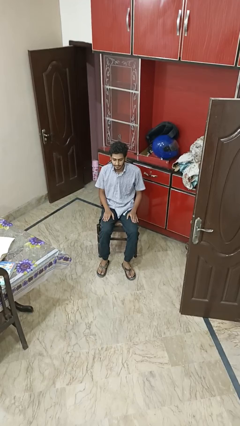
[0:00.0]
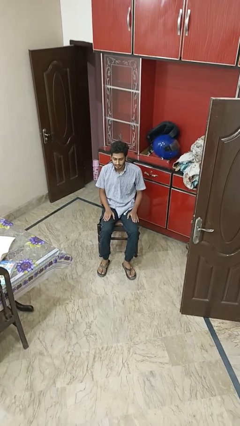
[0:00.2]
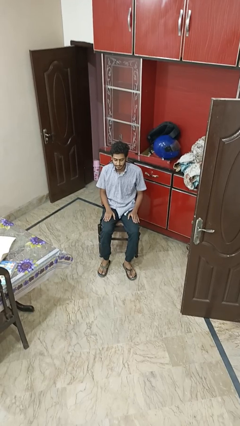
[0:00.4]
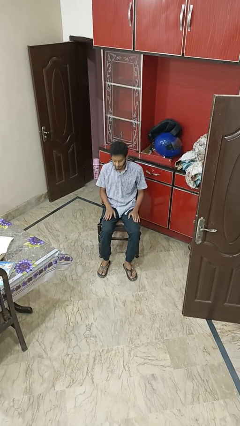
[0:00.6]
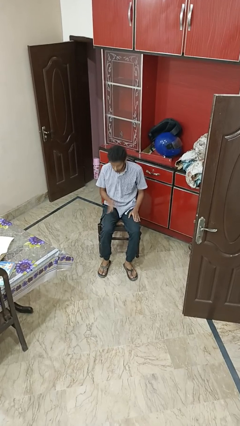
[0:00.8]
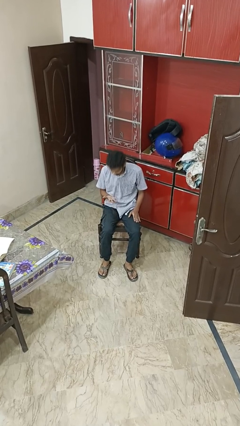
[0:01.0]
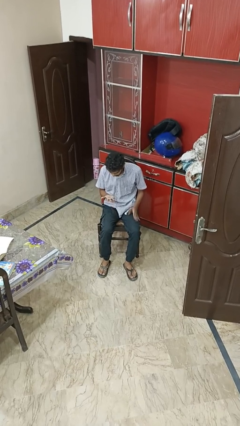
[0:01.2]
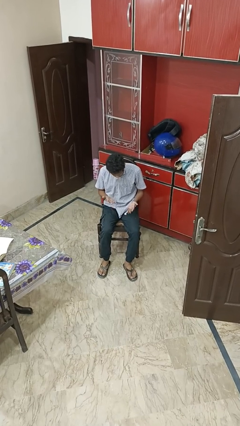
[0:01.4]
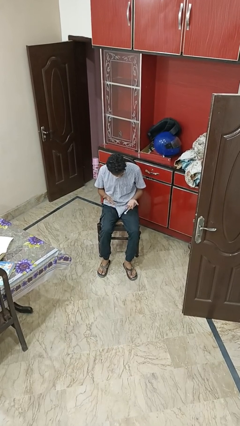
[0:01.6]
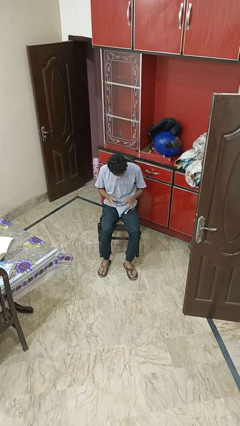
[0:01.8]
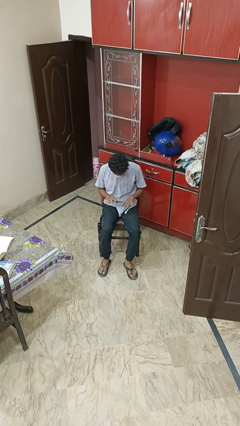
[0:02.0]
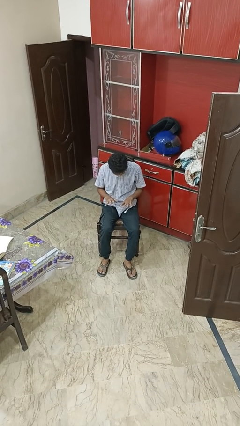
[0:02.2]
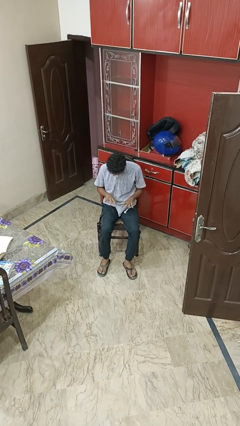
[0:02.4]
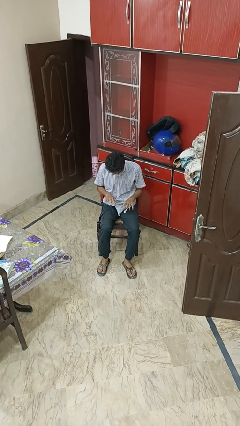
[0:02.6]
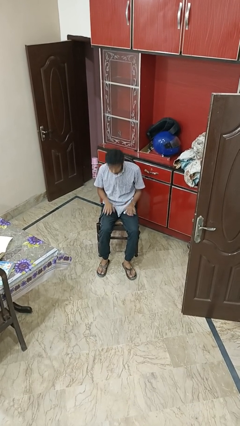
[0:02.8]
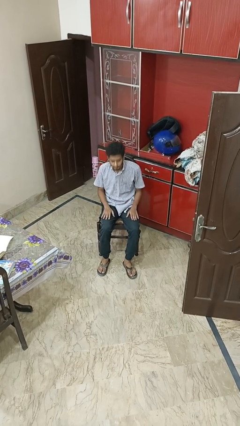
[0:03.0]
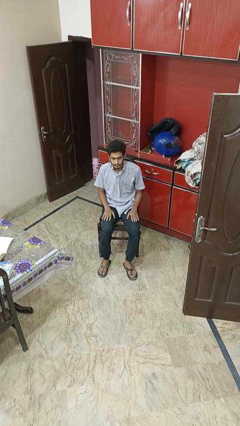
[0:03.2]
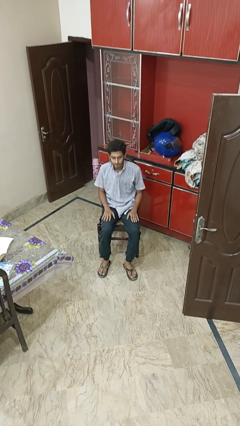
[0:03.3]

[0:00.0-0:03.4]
person looks at hands in lap

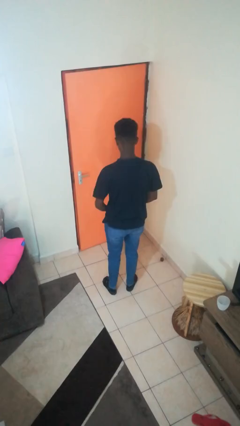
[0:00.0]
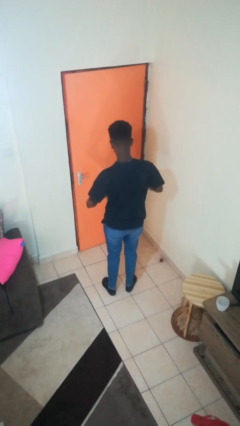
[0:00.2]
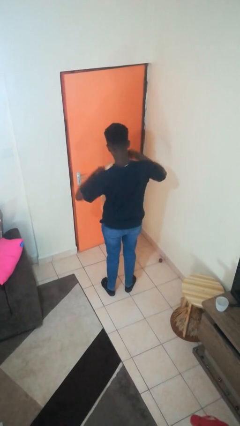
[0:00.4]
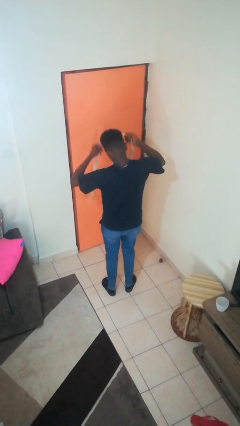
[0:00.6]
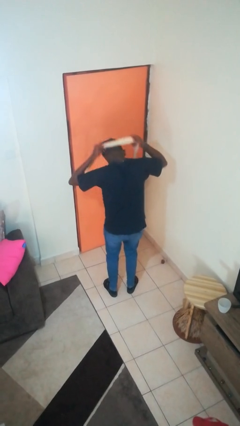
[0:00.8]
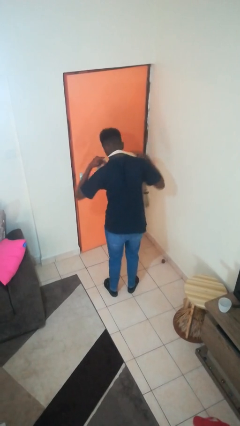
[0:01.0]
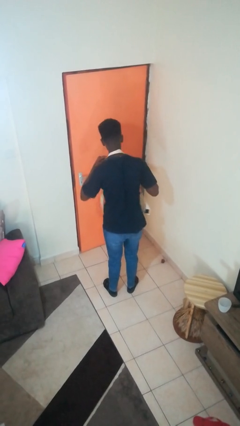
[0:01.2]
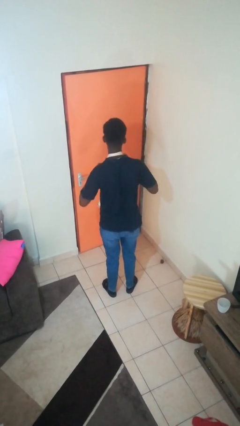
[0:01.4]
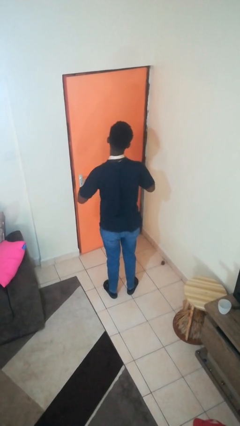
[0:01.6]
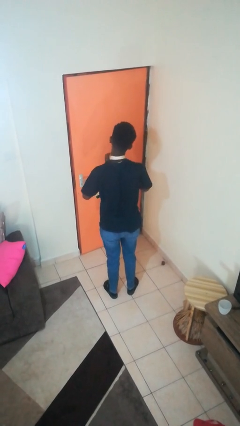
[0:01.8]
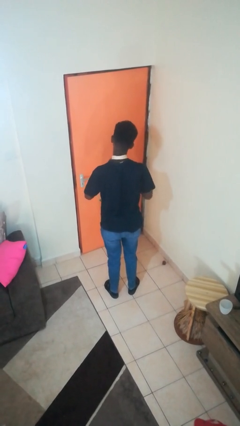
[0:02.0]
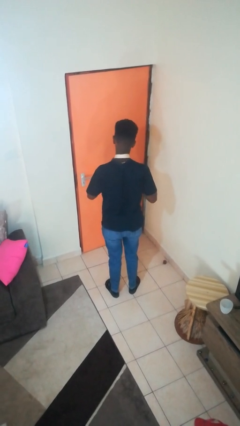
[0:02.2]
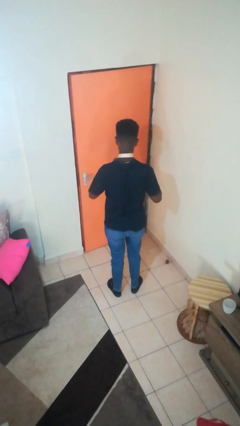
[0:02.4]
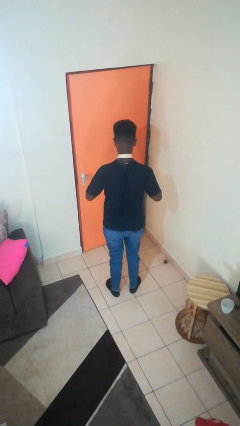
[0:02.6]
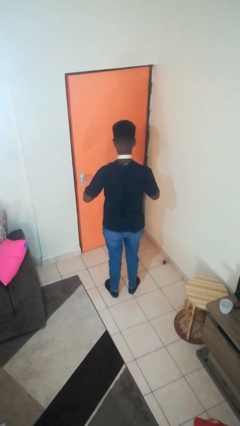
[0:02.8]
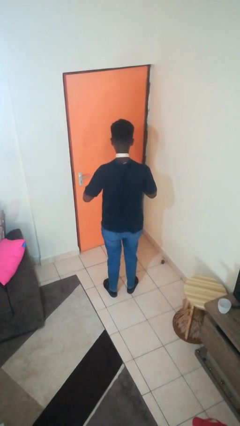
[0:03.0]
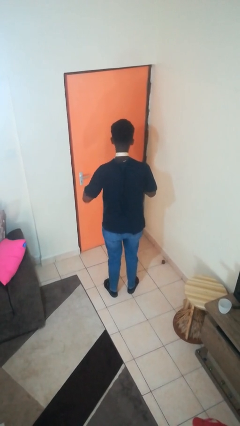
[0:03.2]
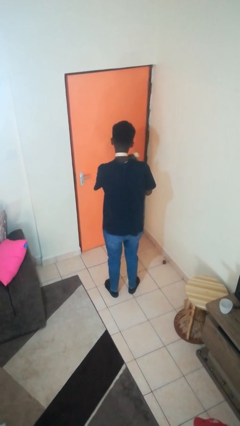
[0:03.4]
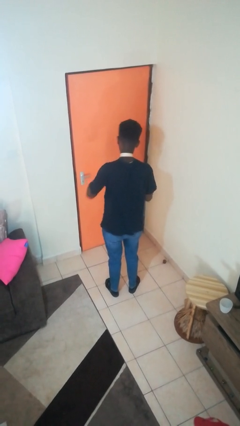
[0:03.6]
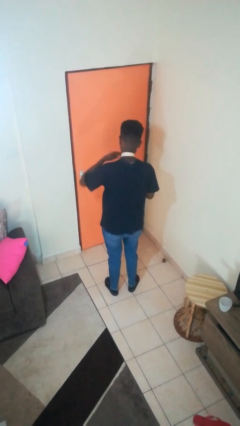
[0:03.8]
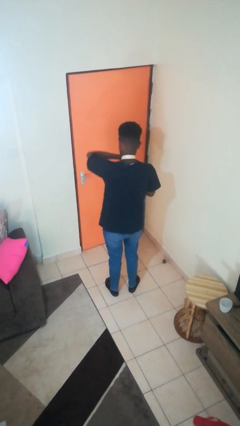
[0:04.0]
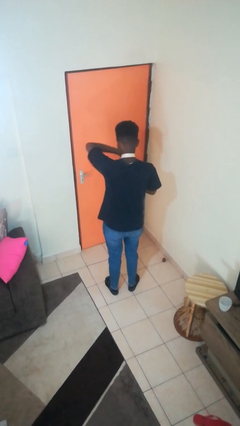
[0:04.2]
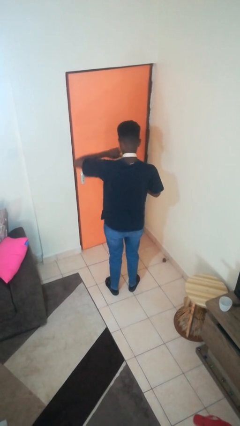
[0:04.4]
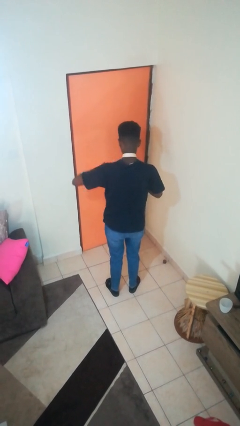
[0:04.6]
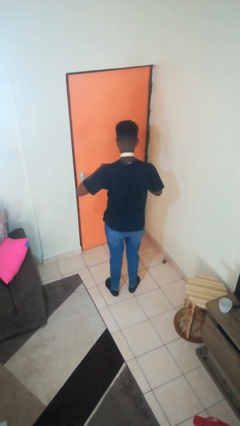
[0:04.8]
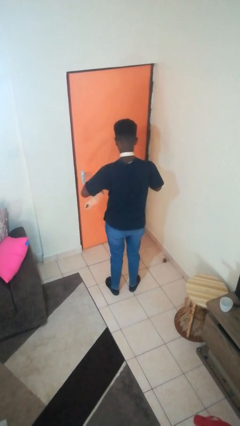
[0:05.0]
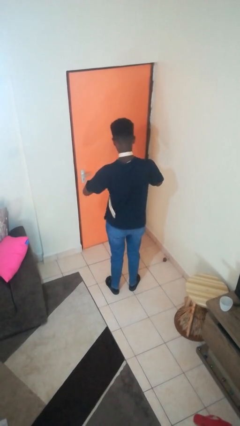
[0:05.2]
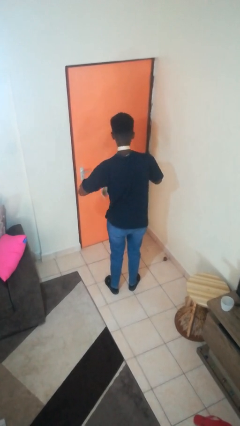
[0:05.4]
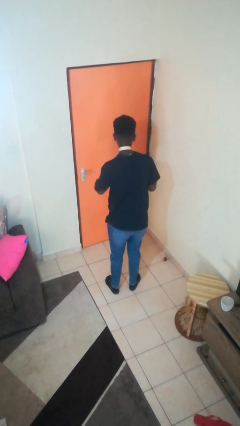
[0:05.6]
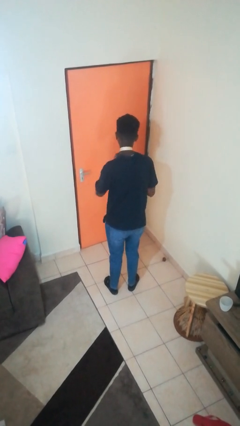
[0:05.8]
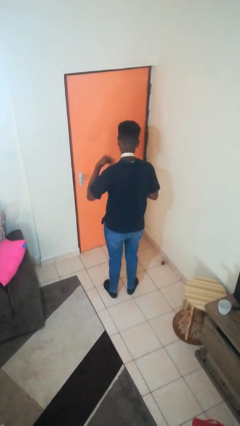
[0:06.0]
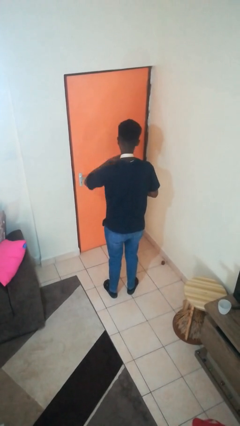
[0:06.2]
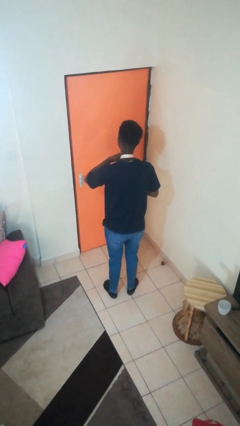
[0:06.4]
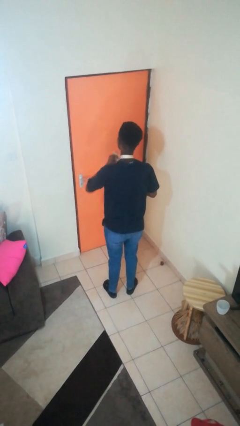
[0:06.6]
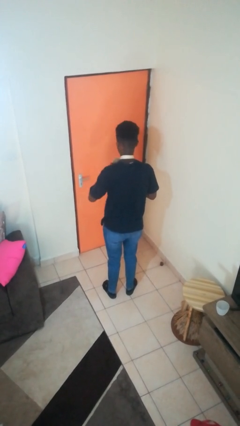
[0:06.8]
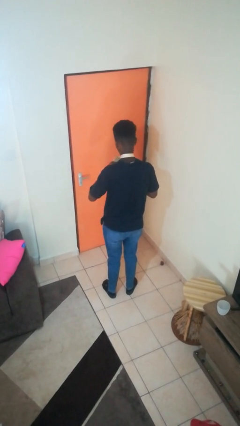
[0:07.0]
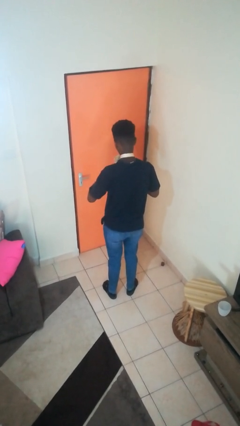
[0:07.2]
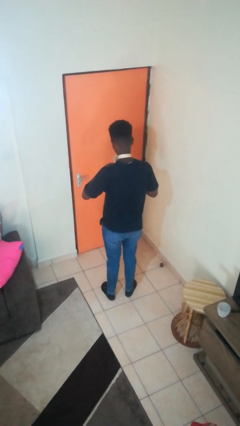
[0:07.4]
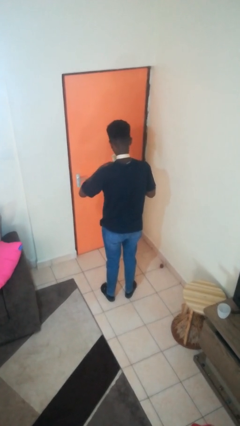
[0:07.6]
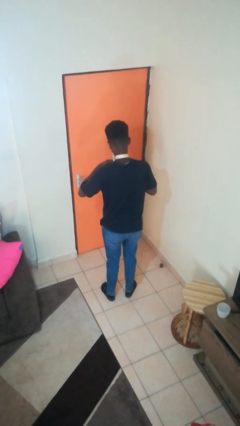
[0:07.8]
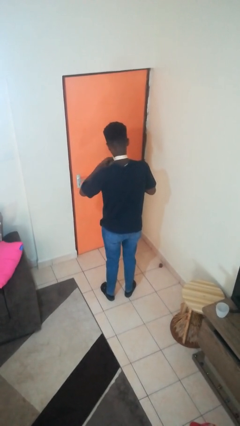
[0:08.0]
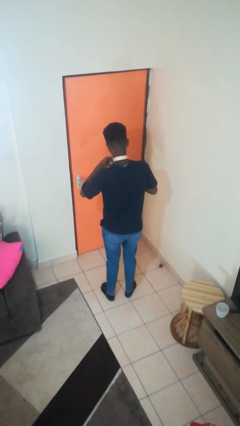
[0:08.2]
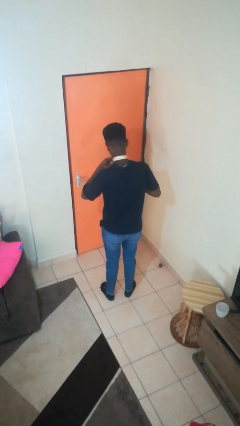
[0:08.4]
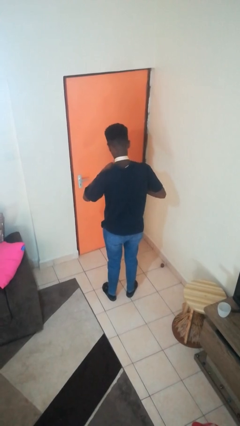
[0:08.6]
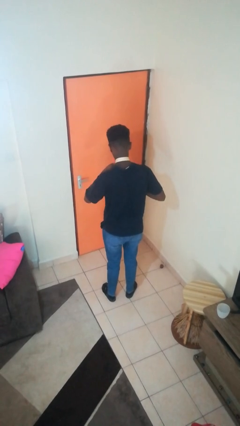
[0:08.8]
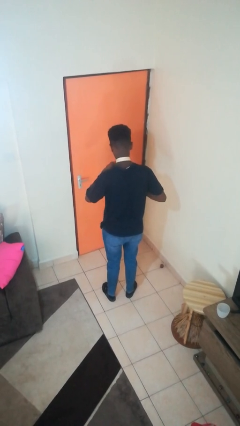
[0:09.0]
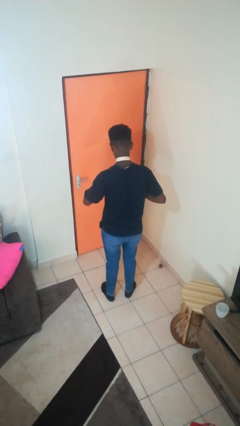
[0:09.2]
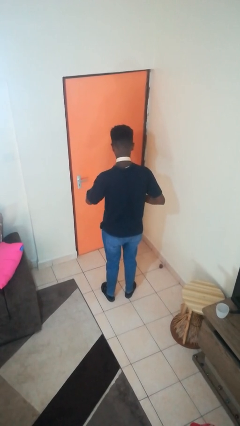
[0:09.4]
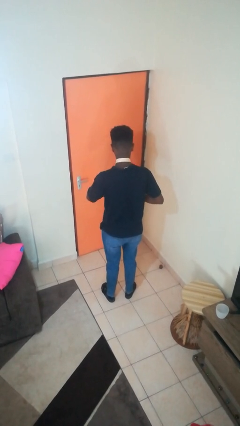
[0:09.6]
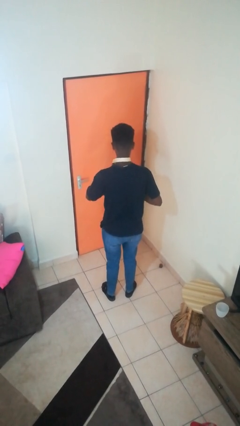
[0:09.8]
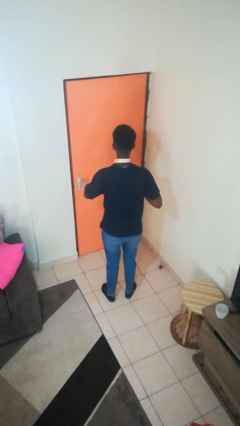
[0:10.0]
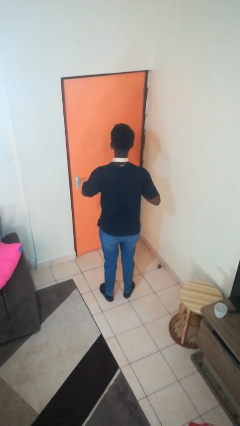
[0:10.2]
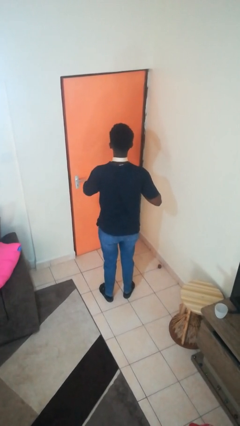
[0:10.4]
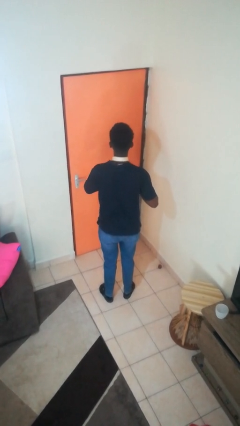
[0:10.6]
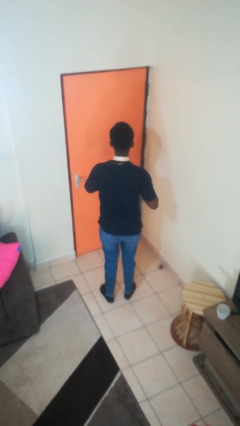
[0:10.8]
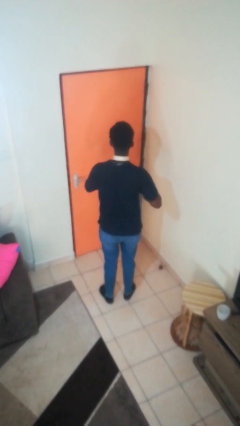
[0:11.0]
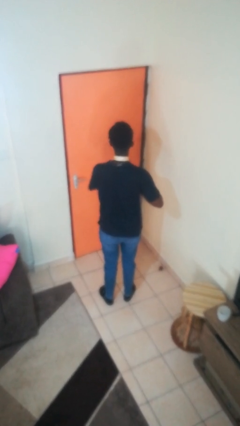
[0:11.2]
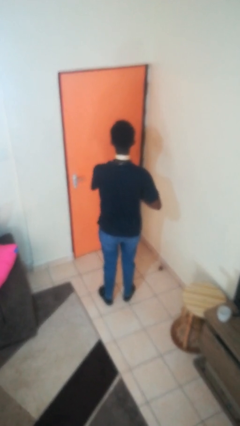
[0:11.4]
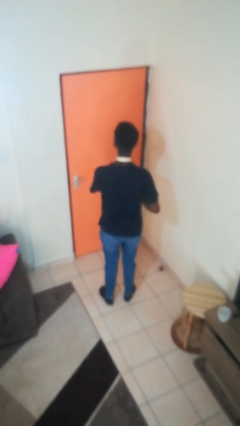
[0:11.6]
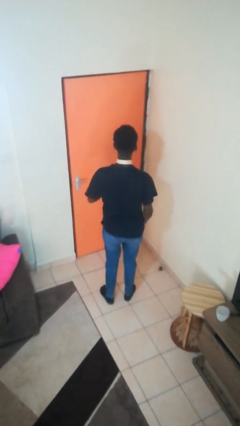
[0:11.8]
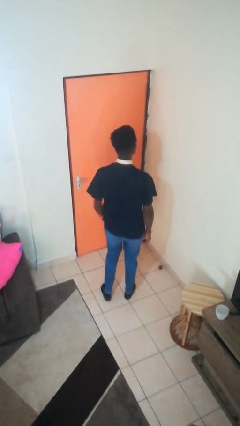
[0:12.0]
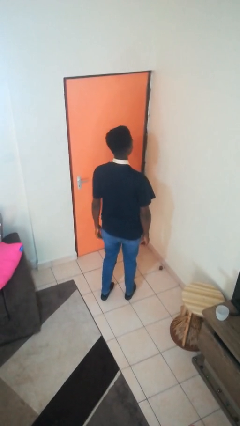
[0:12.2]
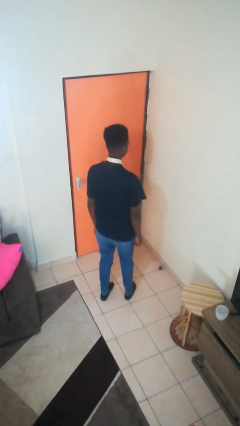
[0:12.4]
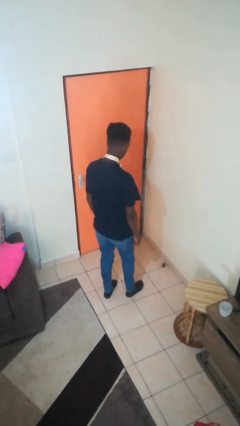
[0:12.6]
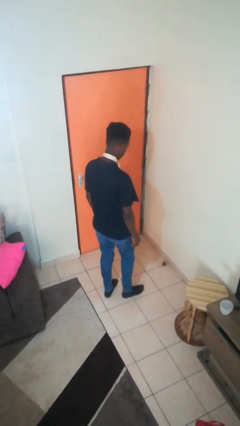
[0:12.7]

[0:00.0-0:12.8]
person puts on necktie

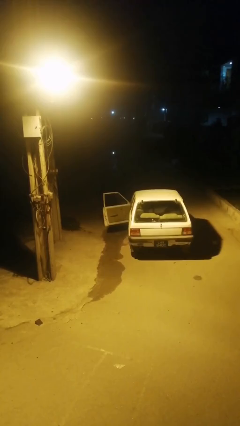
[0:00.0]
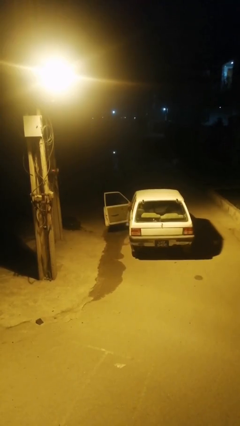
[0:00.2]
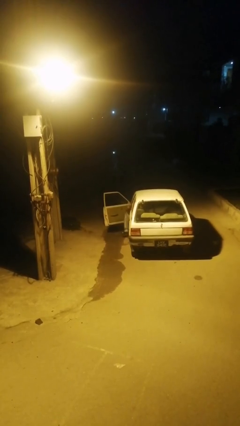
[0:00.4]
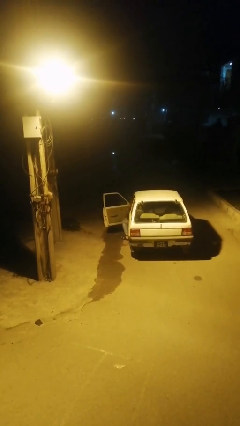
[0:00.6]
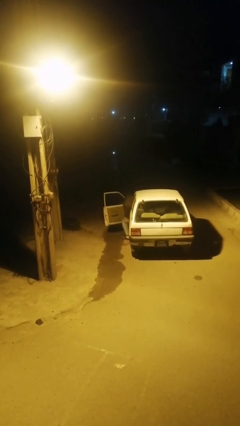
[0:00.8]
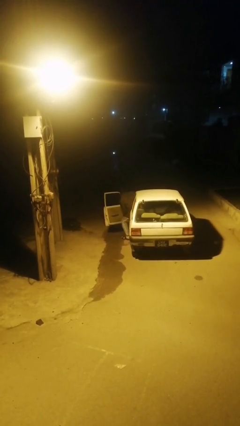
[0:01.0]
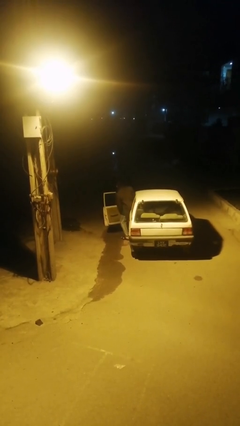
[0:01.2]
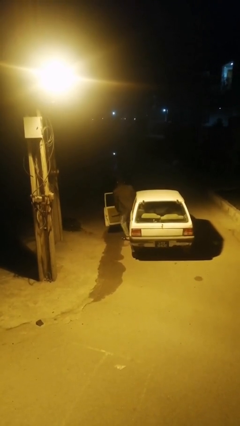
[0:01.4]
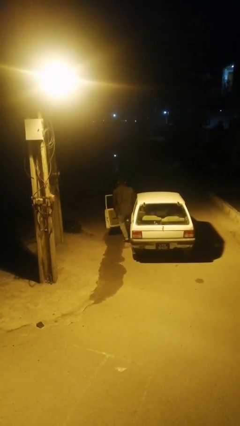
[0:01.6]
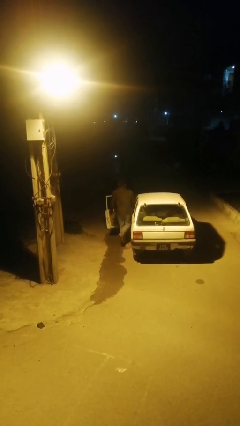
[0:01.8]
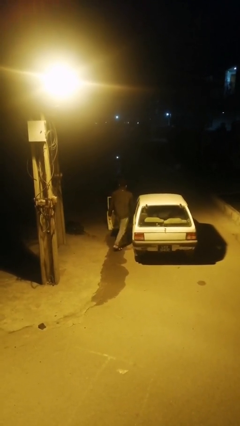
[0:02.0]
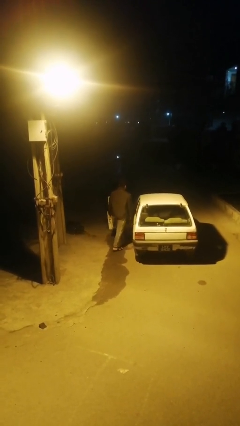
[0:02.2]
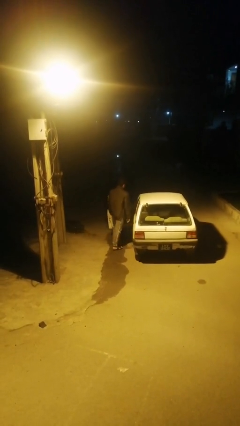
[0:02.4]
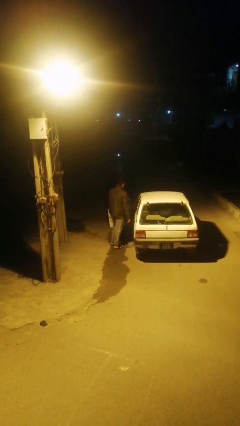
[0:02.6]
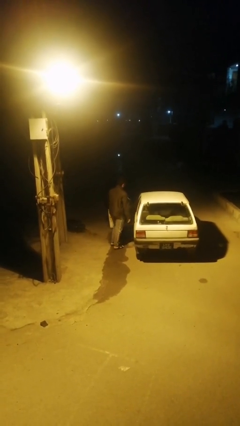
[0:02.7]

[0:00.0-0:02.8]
person exits car
